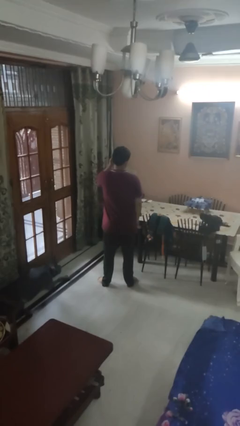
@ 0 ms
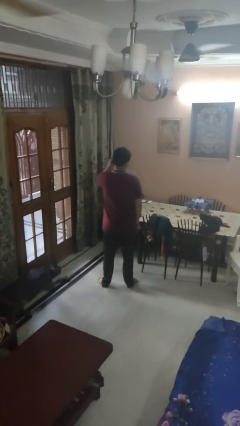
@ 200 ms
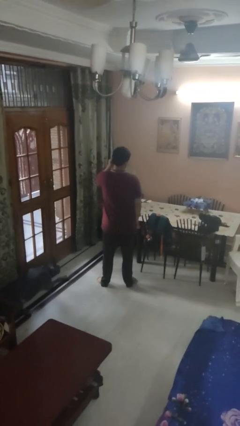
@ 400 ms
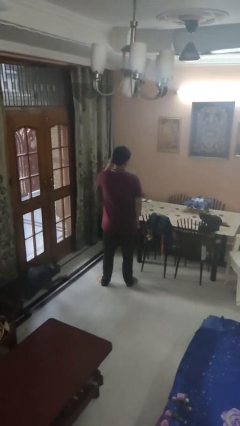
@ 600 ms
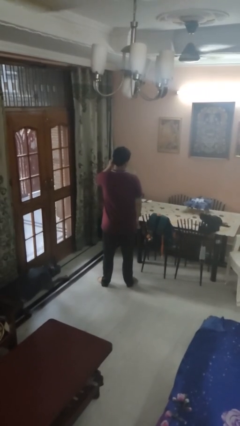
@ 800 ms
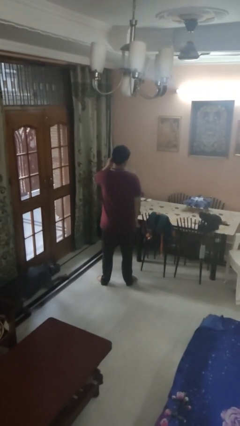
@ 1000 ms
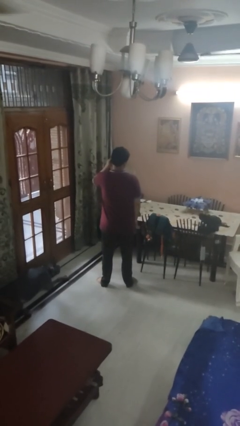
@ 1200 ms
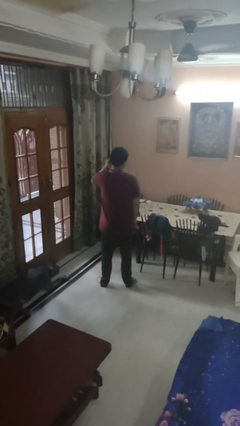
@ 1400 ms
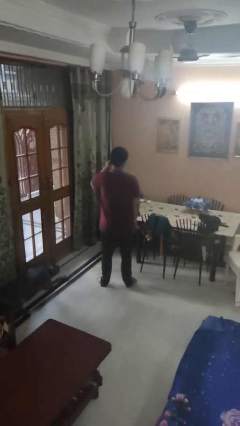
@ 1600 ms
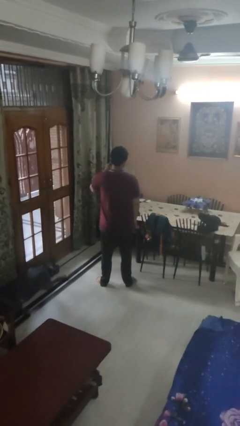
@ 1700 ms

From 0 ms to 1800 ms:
person touches earlobe

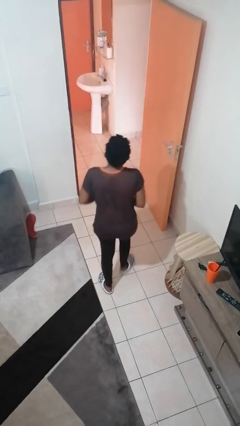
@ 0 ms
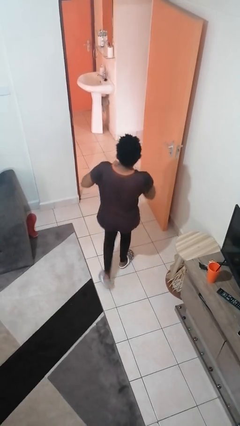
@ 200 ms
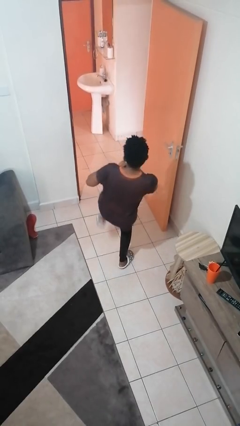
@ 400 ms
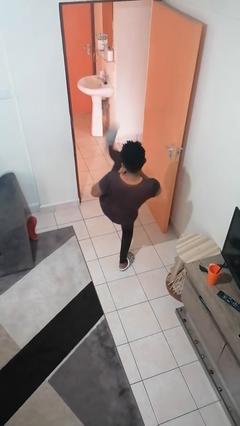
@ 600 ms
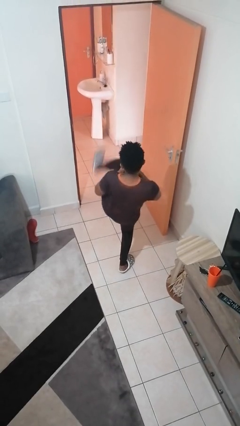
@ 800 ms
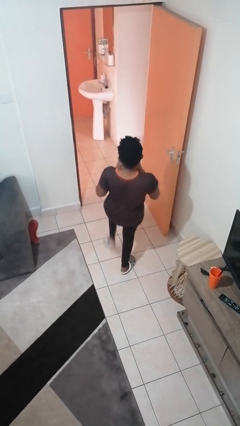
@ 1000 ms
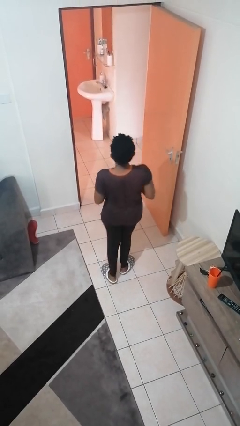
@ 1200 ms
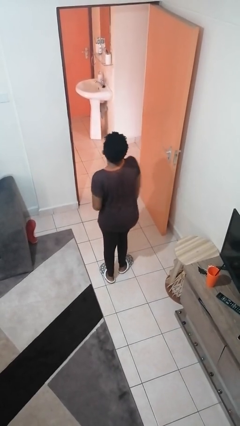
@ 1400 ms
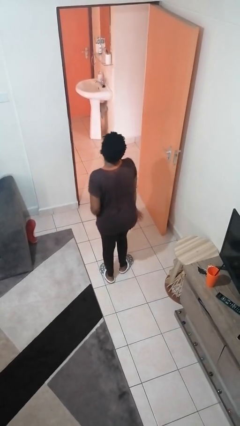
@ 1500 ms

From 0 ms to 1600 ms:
person karate kicks

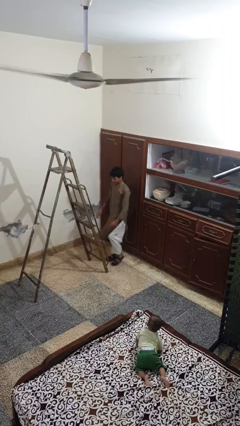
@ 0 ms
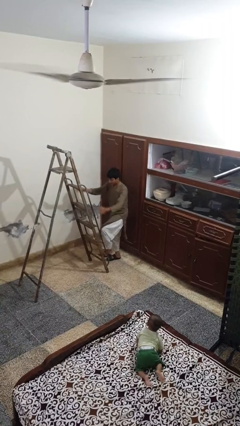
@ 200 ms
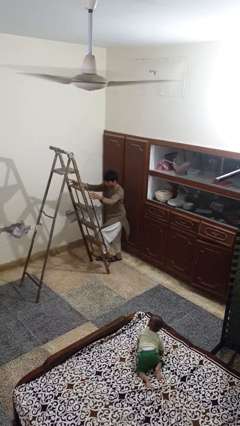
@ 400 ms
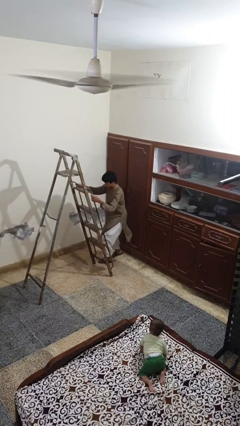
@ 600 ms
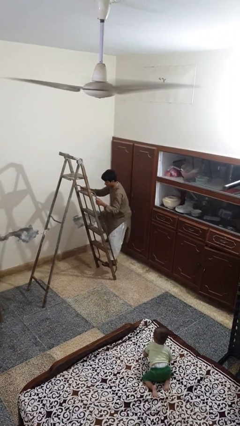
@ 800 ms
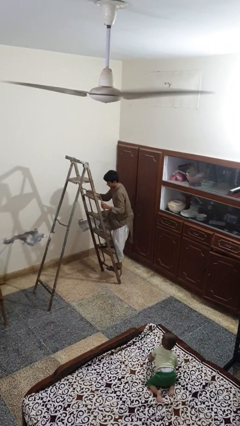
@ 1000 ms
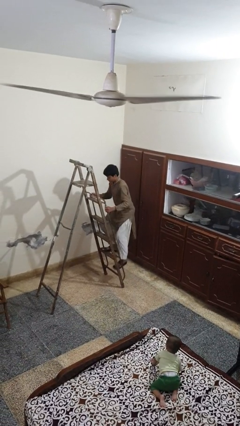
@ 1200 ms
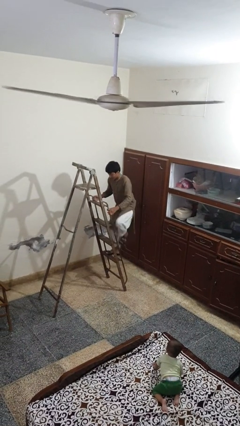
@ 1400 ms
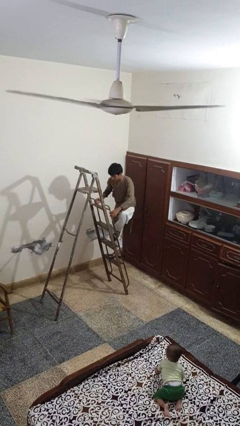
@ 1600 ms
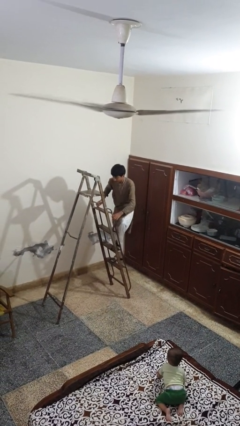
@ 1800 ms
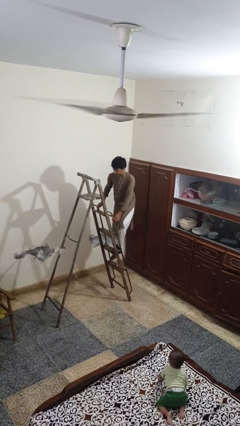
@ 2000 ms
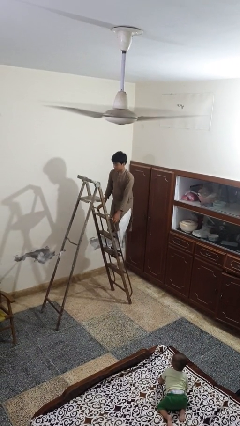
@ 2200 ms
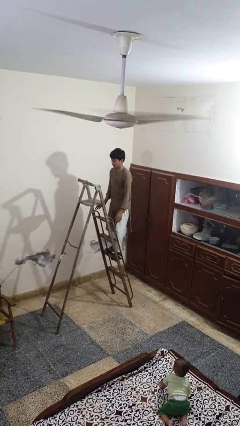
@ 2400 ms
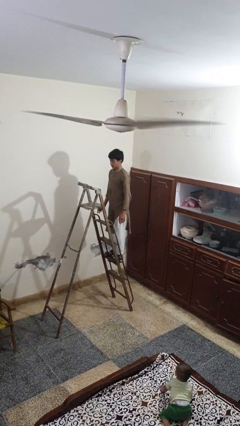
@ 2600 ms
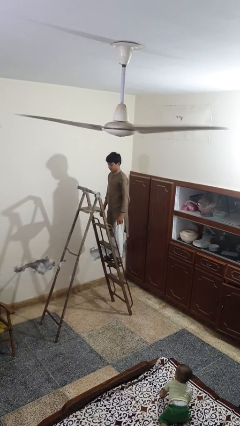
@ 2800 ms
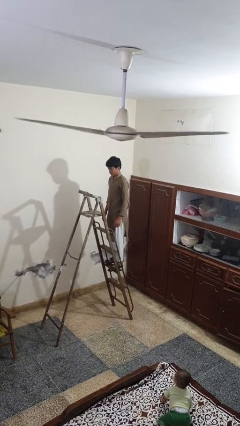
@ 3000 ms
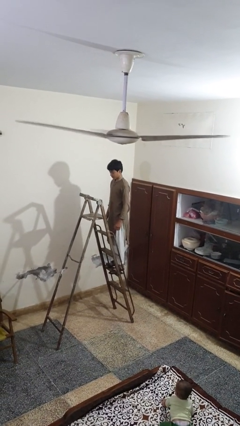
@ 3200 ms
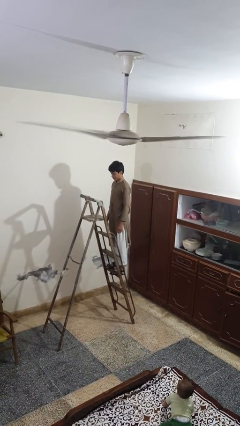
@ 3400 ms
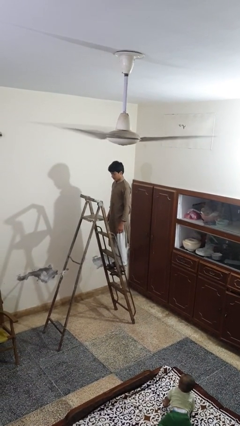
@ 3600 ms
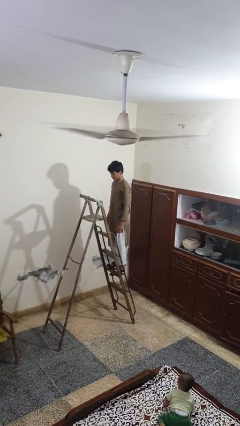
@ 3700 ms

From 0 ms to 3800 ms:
person climbs up ladder

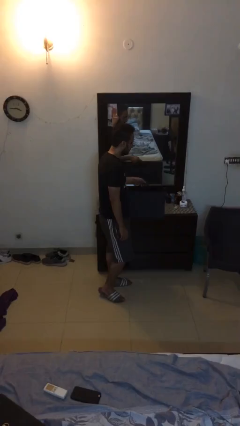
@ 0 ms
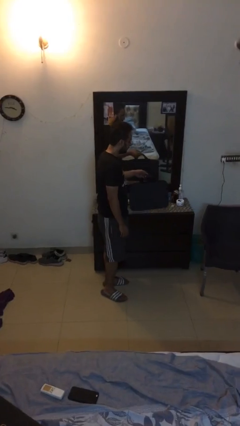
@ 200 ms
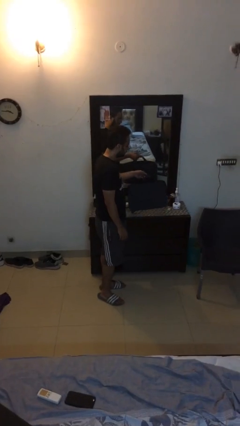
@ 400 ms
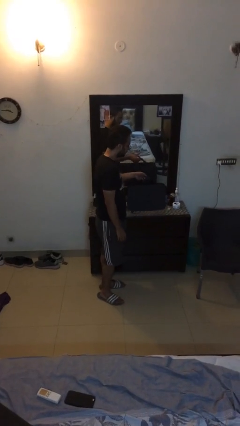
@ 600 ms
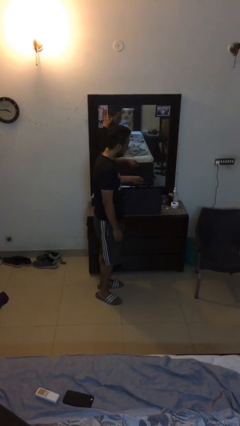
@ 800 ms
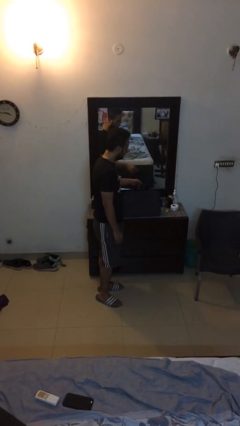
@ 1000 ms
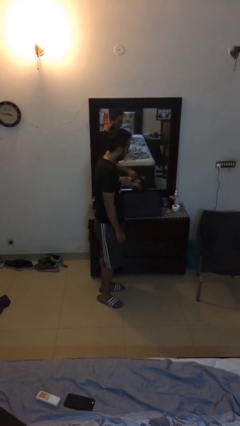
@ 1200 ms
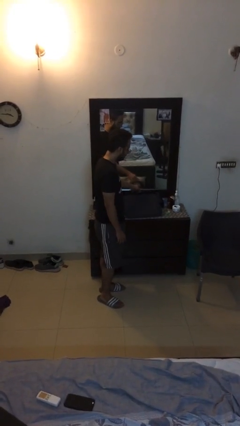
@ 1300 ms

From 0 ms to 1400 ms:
person puts down object on table

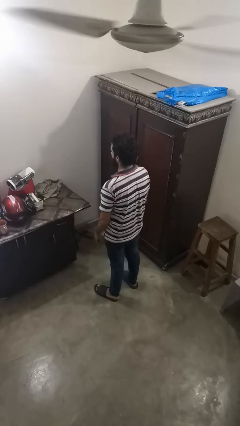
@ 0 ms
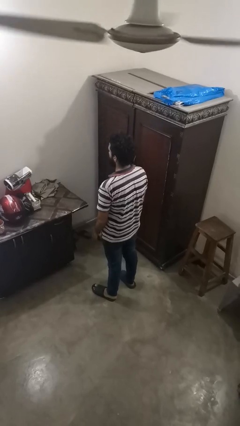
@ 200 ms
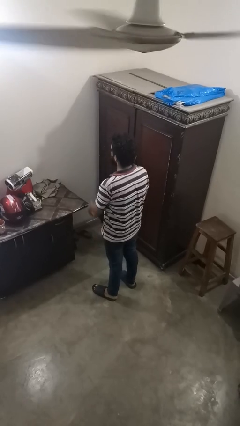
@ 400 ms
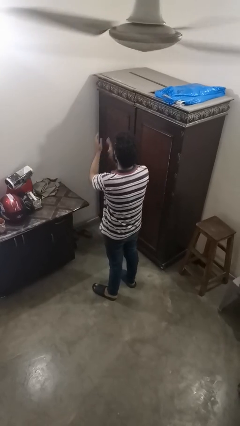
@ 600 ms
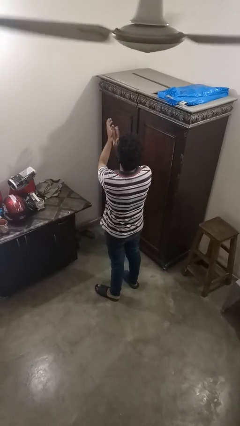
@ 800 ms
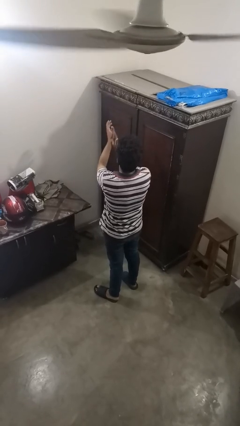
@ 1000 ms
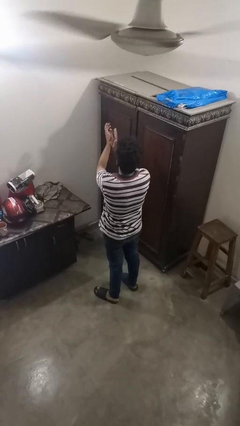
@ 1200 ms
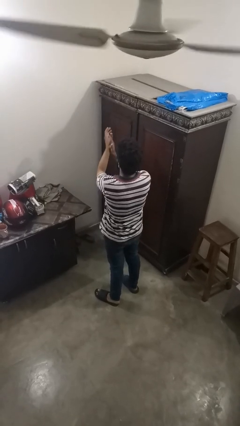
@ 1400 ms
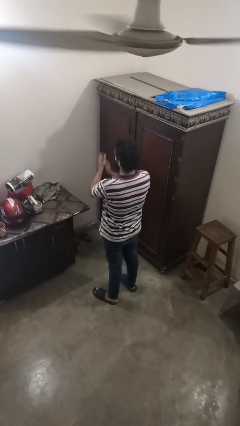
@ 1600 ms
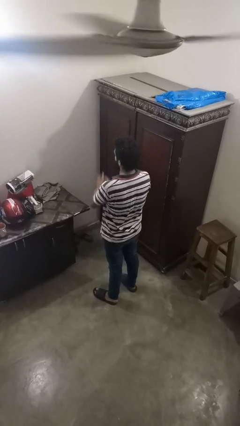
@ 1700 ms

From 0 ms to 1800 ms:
person claps hands

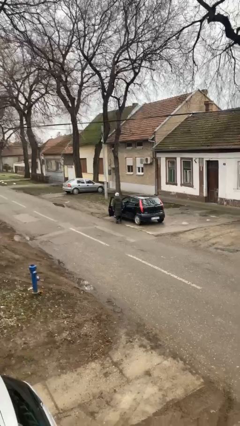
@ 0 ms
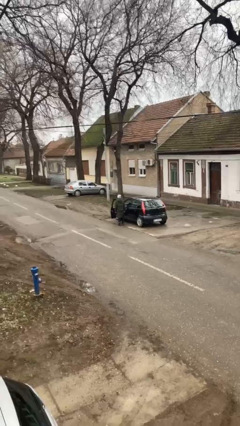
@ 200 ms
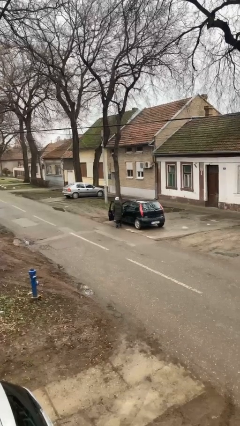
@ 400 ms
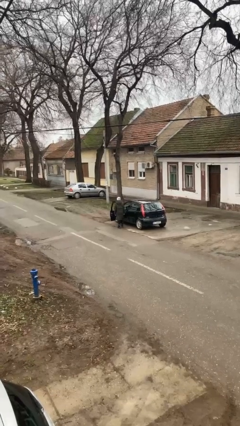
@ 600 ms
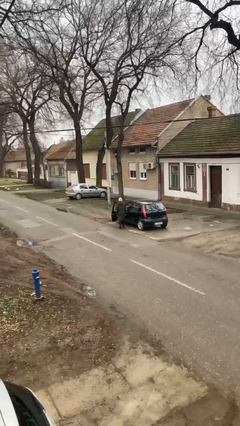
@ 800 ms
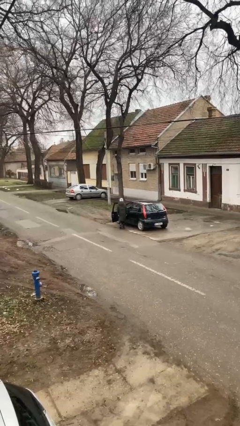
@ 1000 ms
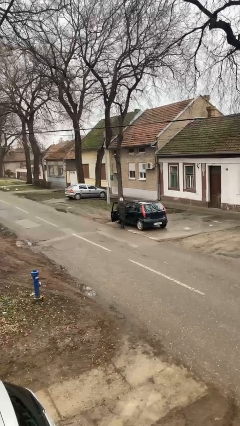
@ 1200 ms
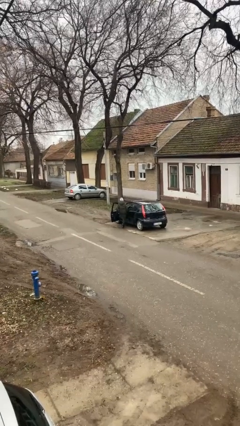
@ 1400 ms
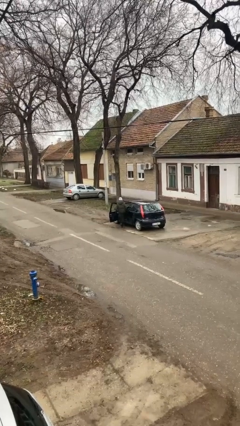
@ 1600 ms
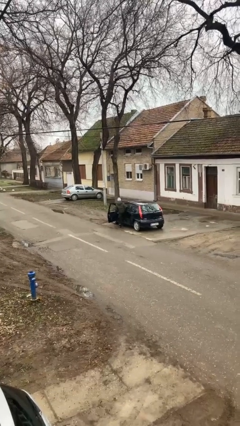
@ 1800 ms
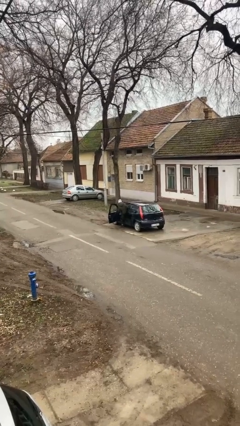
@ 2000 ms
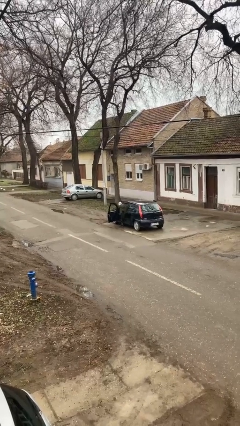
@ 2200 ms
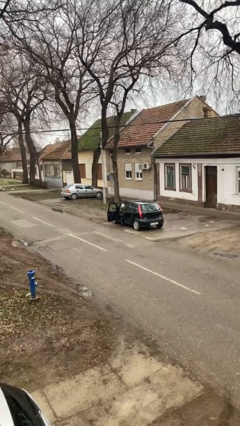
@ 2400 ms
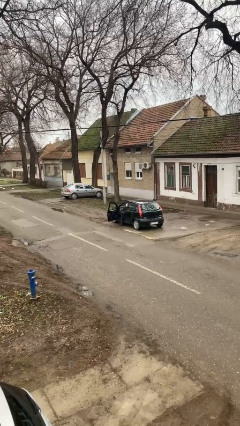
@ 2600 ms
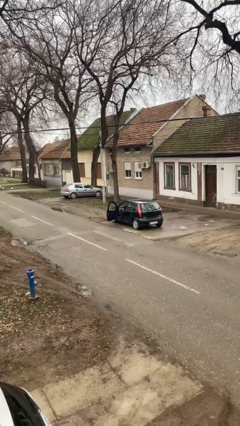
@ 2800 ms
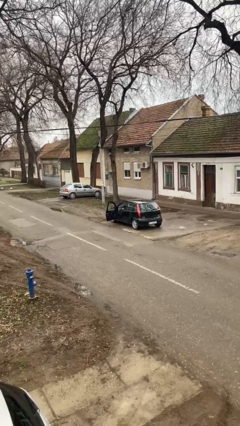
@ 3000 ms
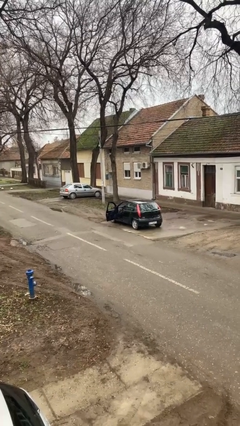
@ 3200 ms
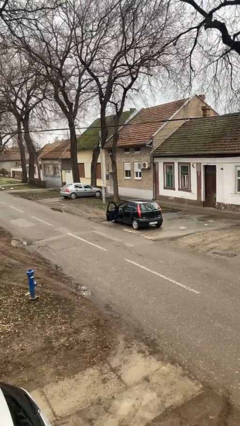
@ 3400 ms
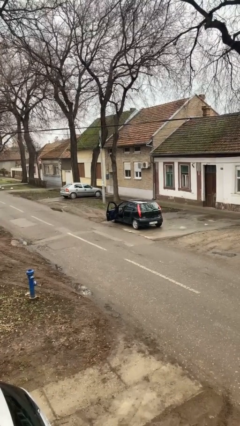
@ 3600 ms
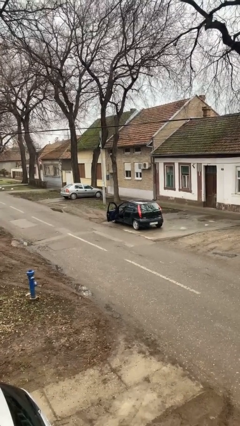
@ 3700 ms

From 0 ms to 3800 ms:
person enters car

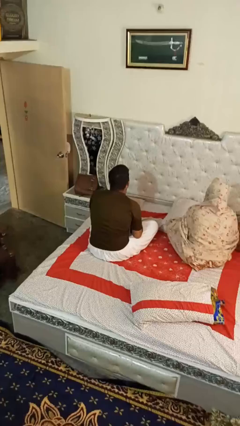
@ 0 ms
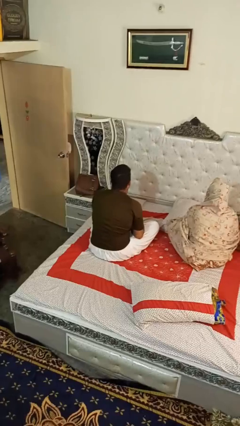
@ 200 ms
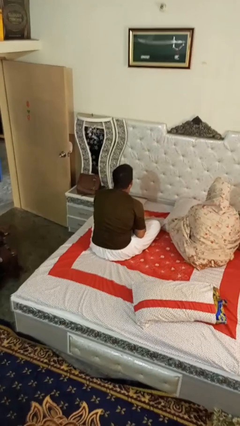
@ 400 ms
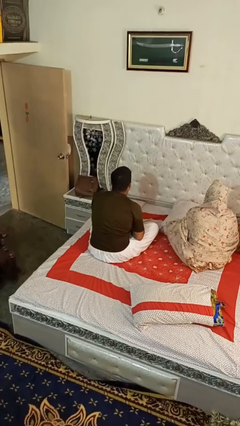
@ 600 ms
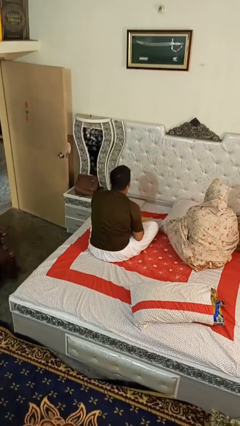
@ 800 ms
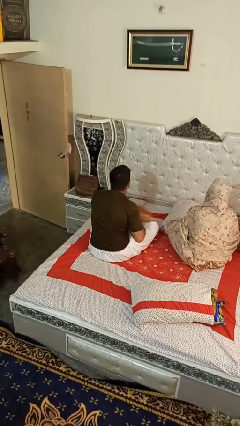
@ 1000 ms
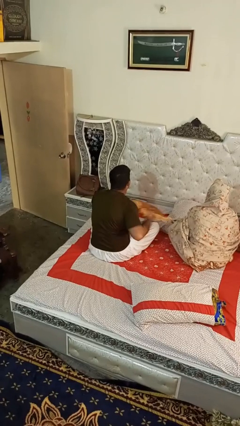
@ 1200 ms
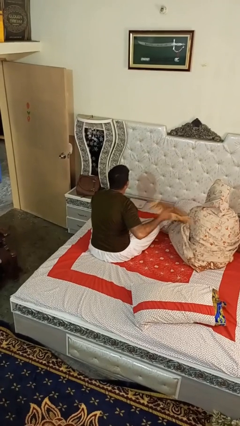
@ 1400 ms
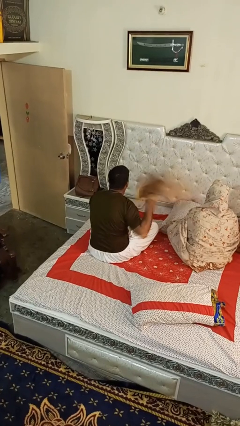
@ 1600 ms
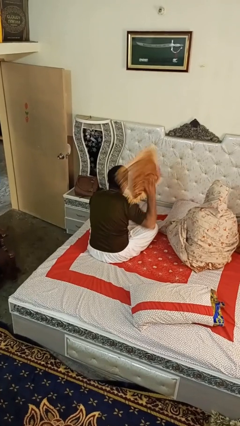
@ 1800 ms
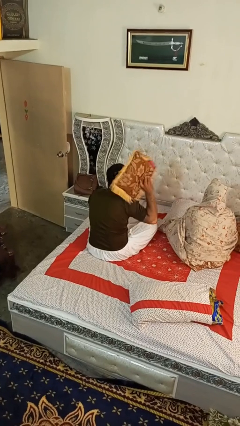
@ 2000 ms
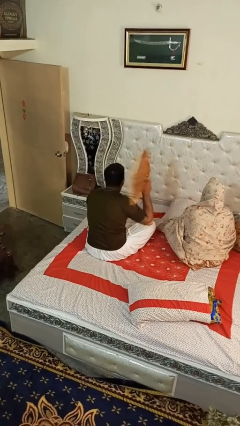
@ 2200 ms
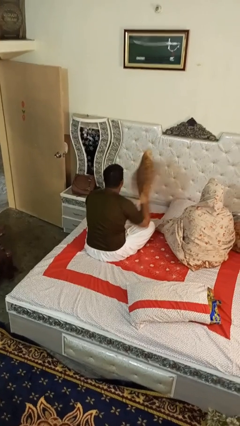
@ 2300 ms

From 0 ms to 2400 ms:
person hits person with pillow

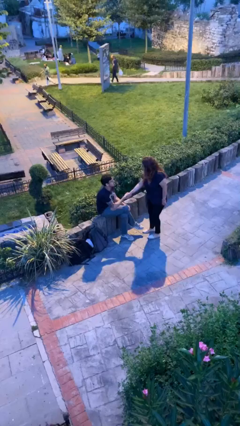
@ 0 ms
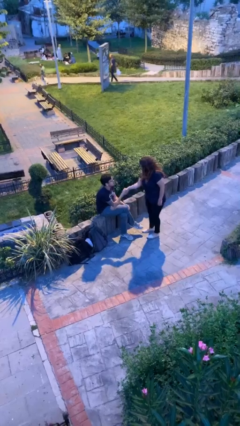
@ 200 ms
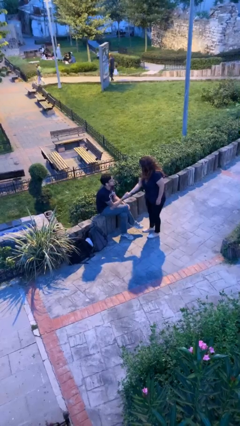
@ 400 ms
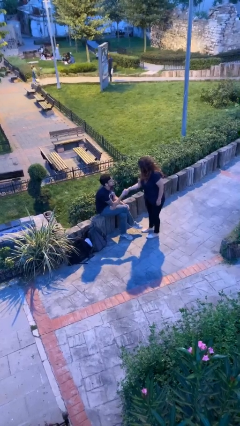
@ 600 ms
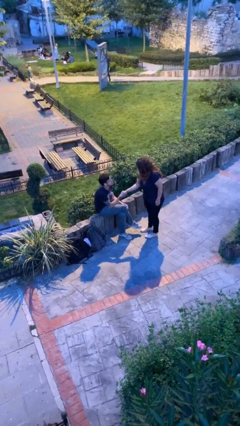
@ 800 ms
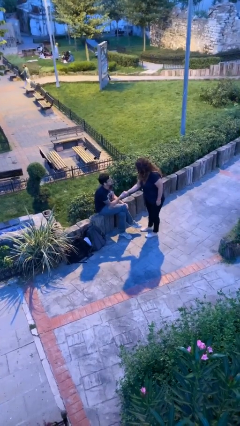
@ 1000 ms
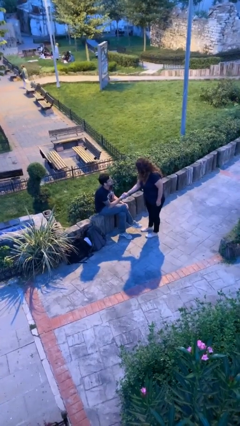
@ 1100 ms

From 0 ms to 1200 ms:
person shakes hand
